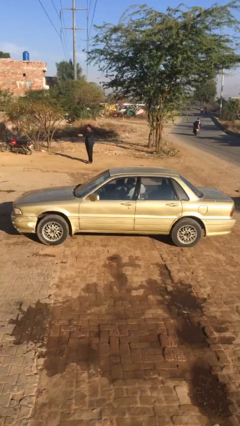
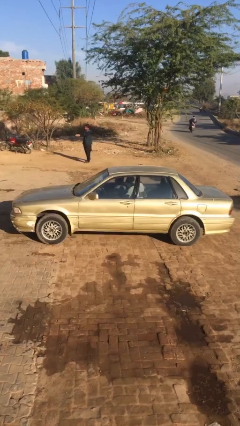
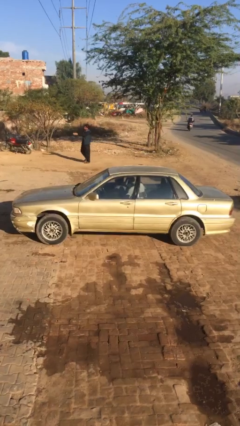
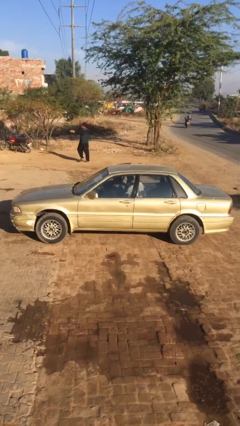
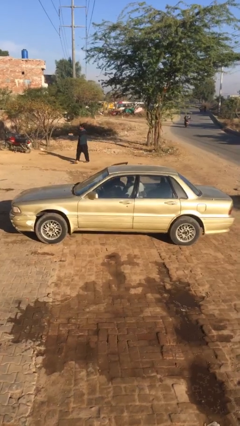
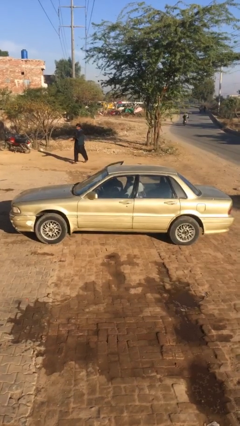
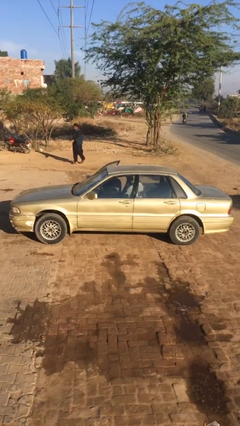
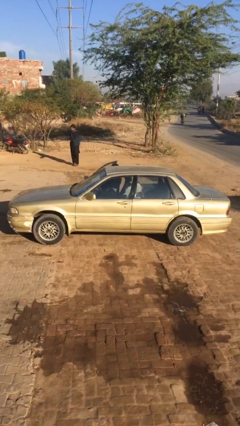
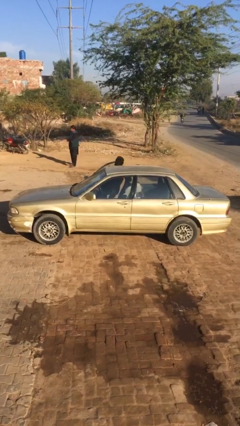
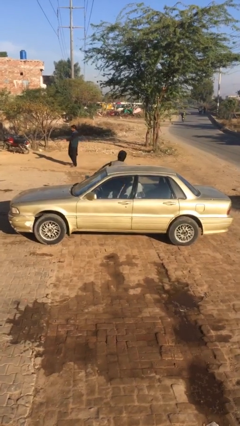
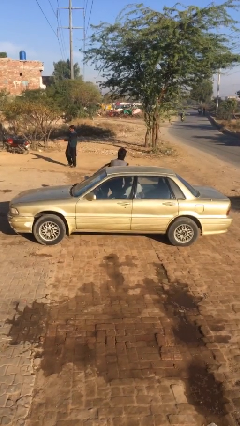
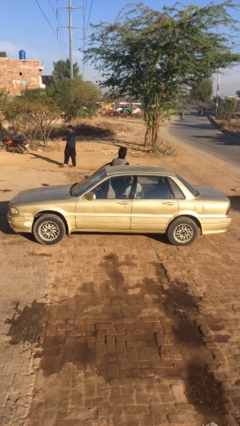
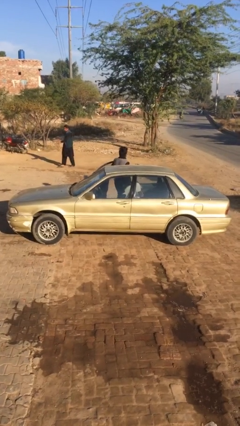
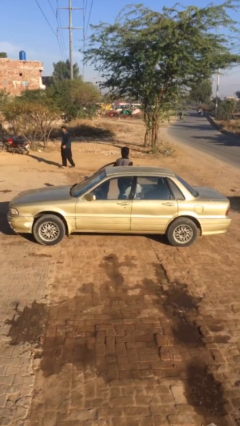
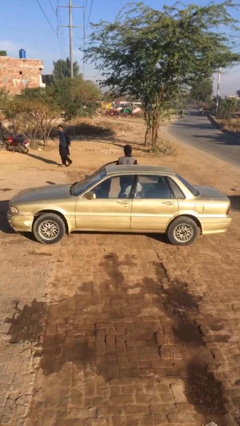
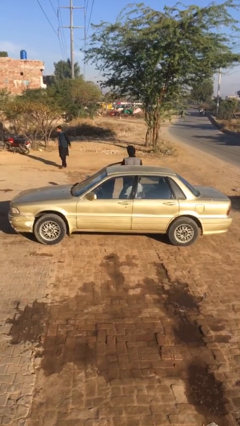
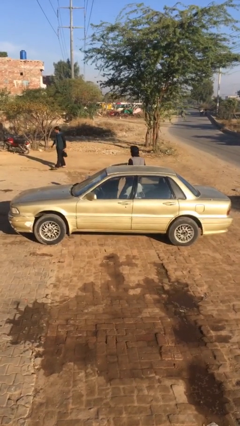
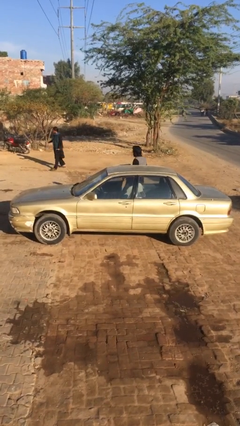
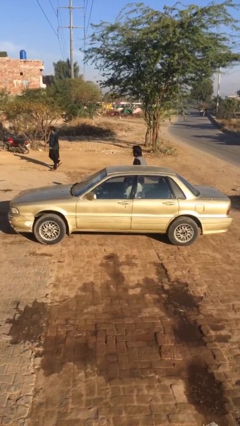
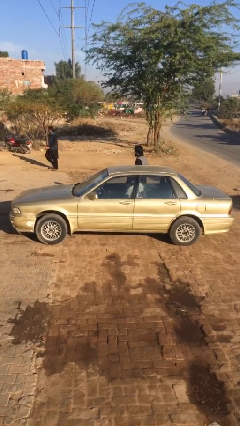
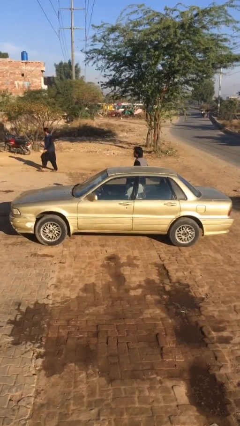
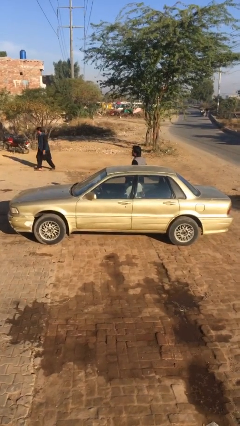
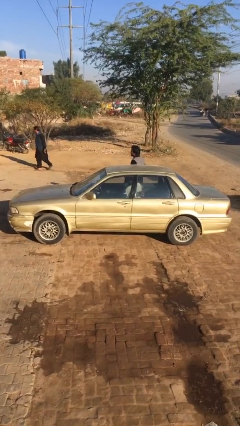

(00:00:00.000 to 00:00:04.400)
car drops off person

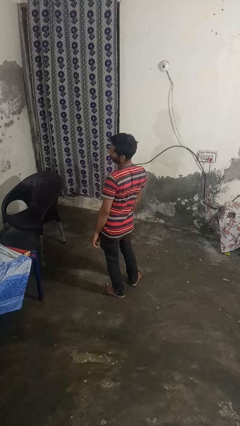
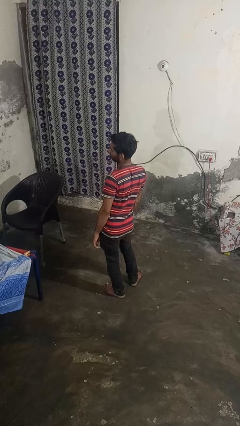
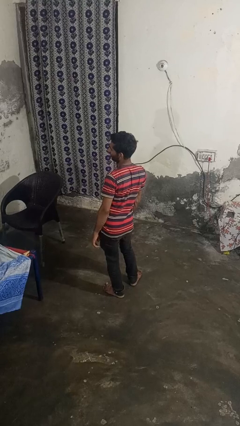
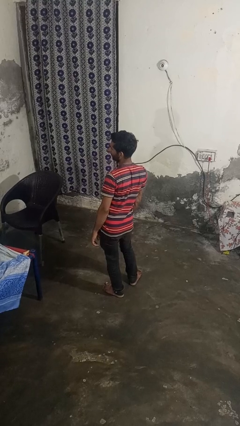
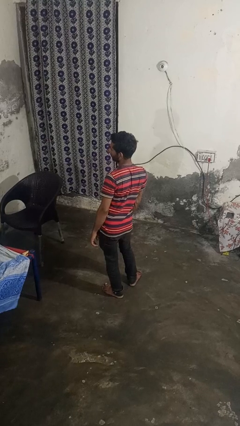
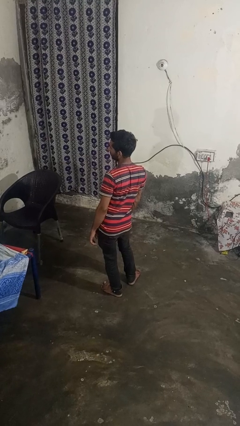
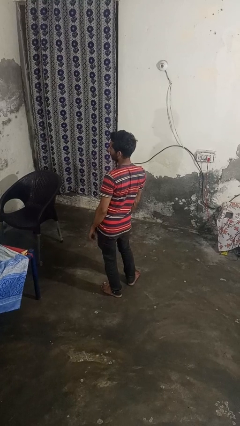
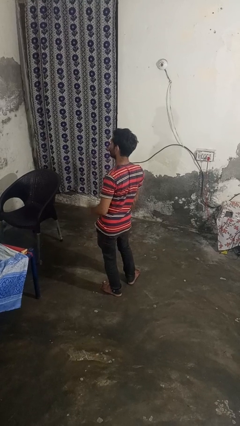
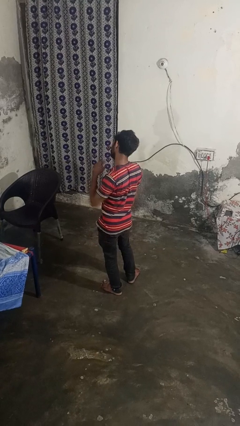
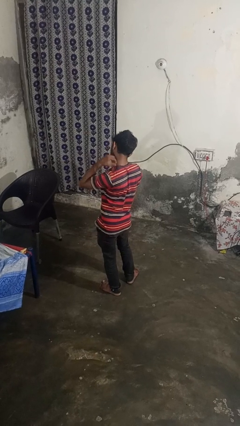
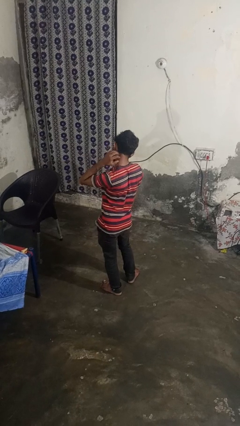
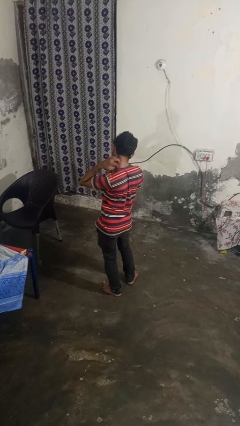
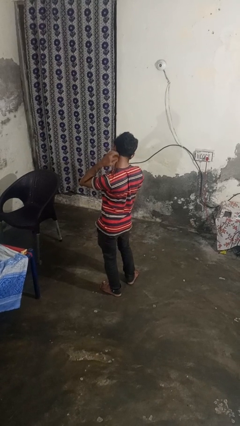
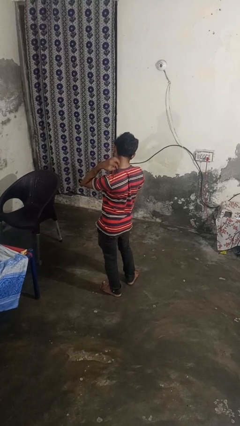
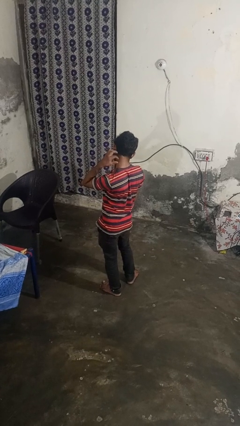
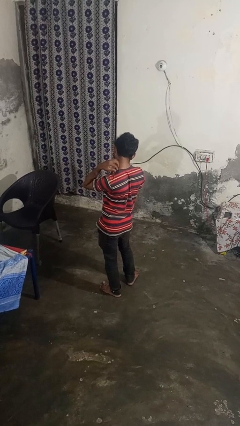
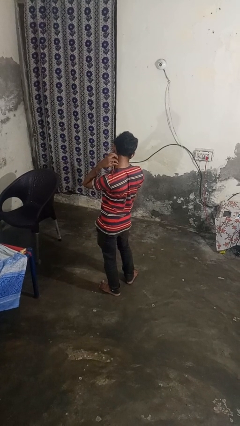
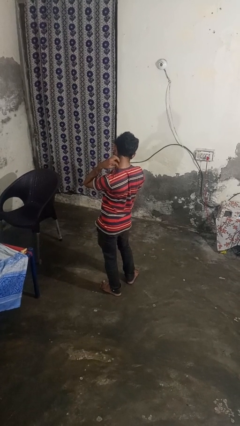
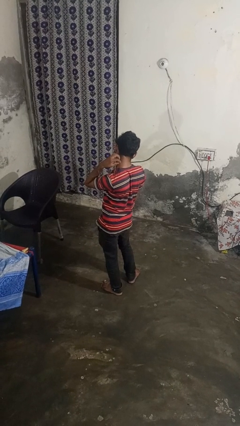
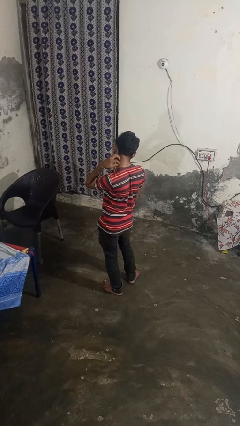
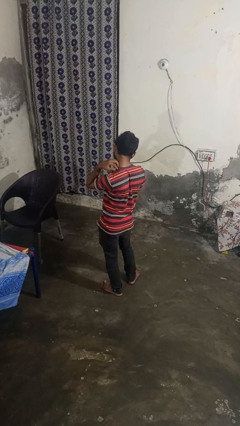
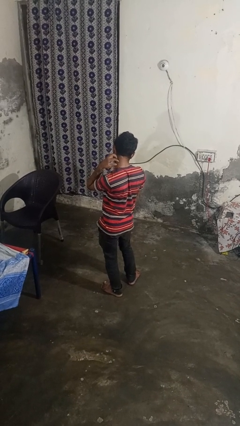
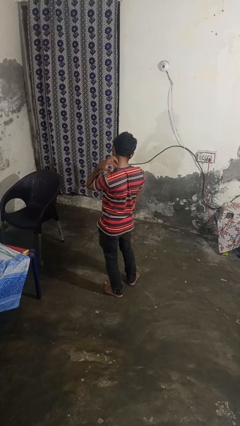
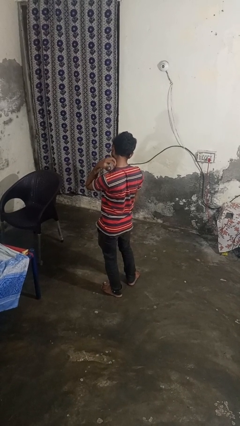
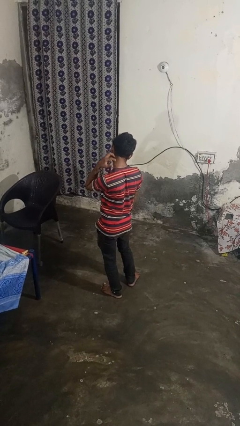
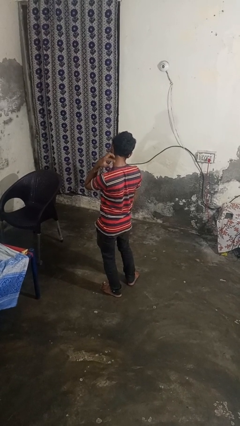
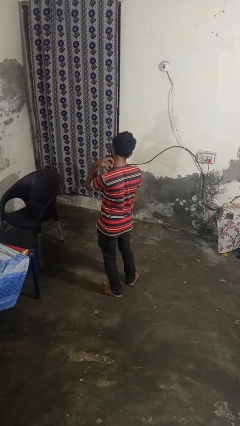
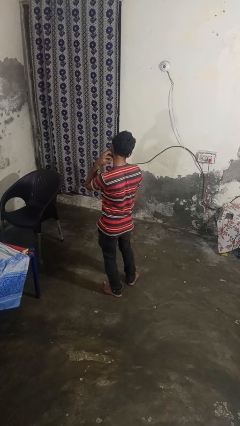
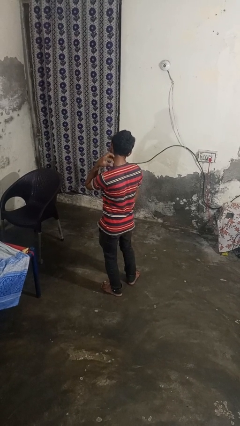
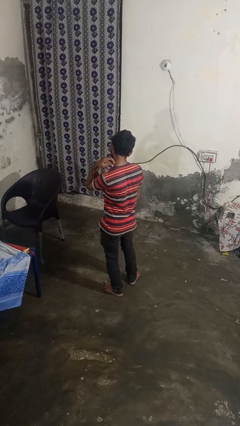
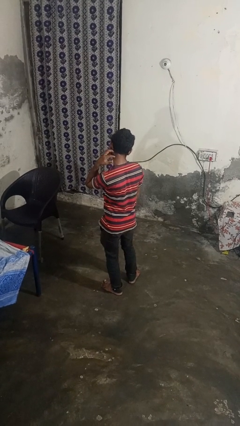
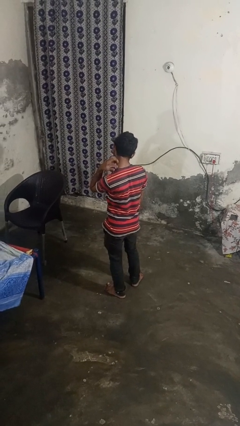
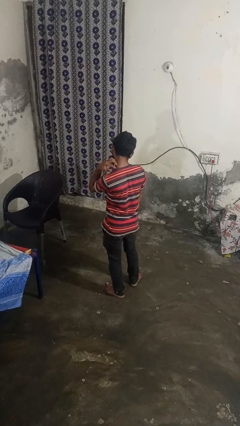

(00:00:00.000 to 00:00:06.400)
person cracks knuckles

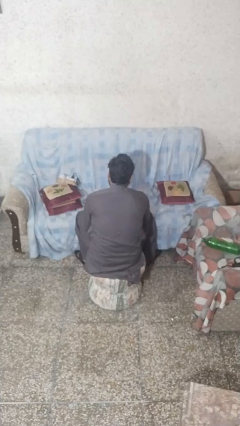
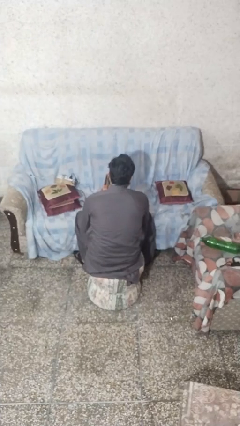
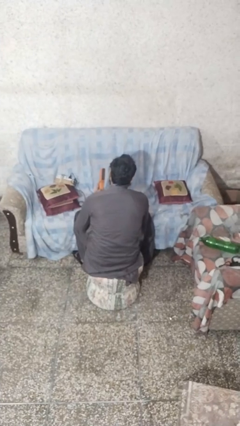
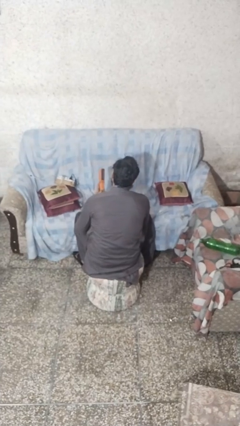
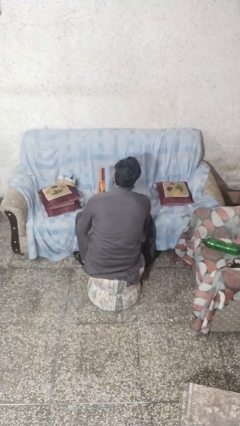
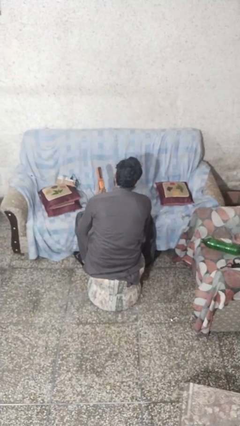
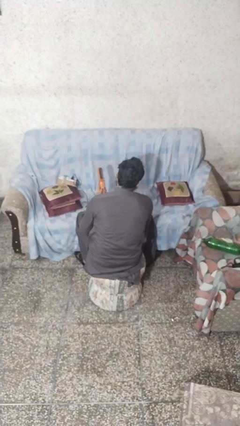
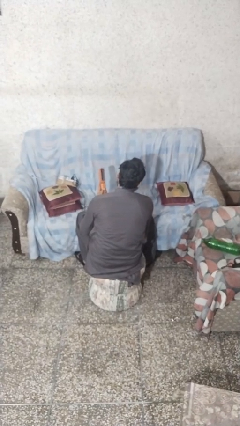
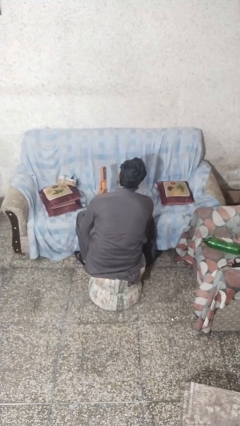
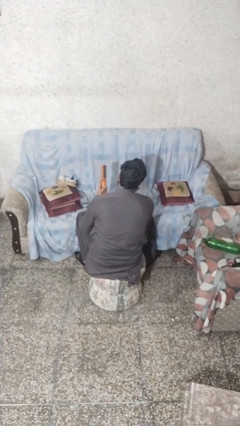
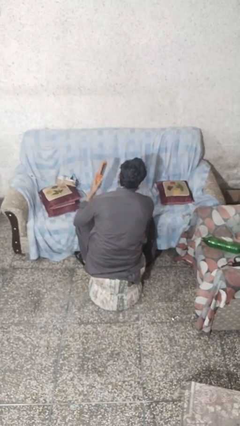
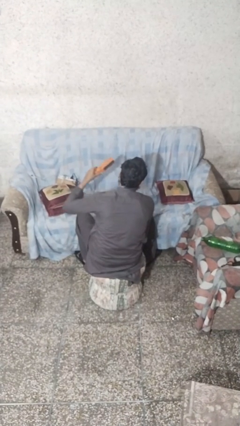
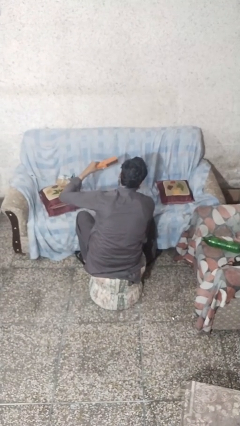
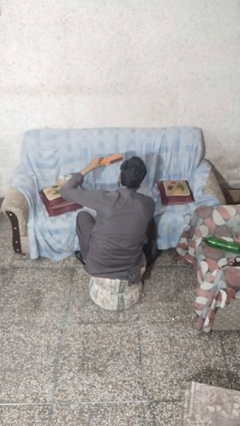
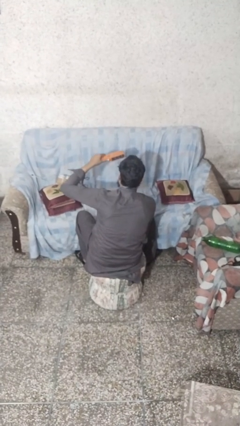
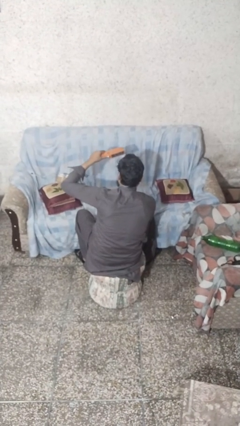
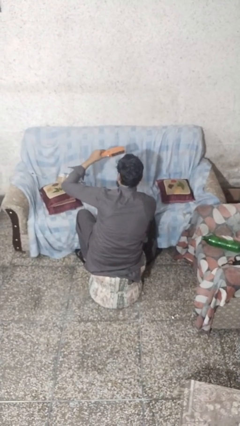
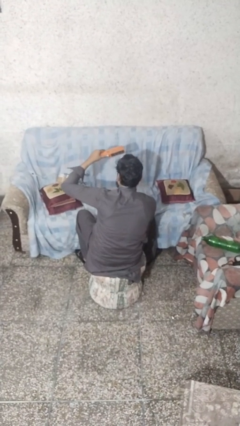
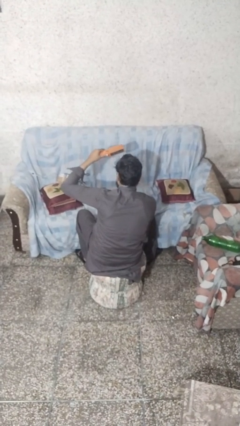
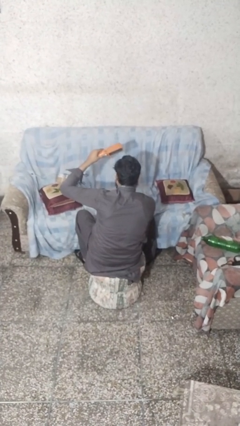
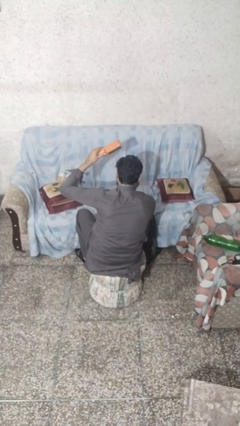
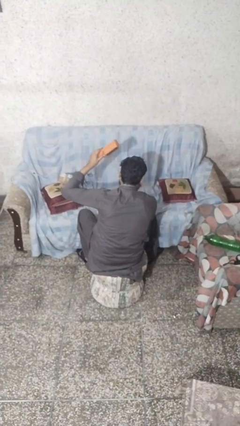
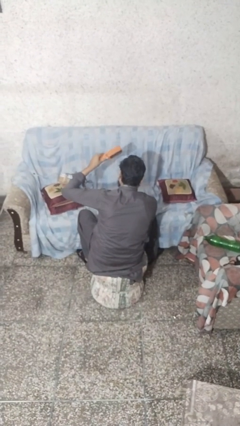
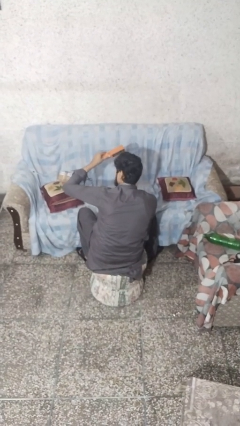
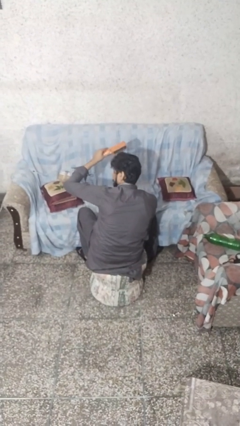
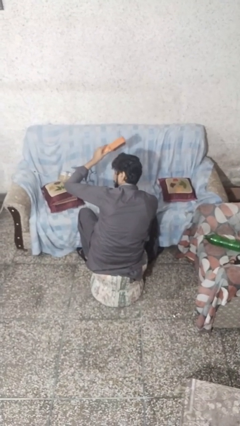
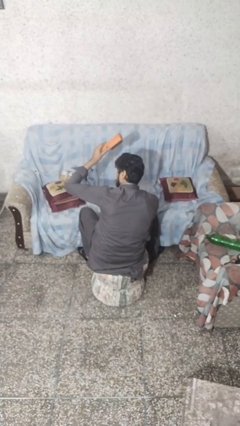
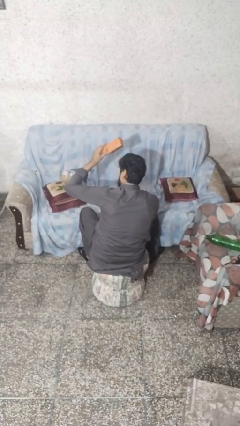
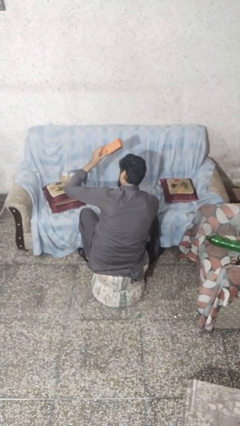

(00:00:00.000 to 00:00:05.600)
person dries hair with hairdryer

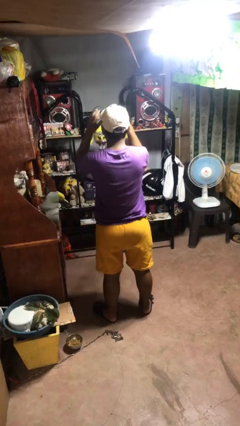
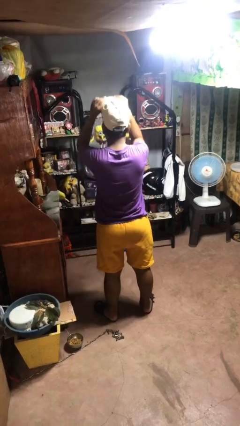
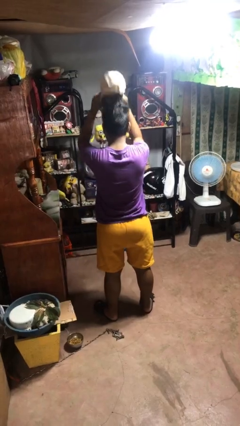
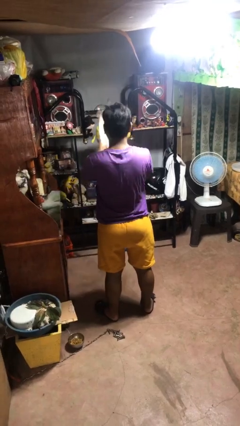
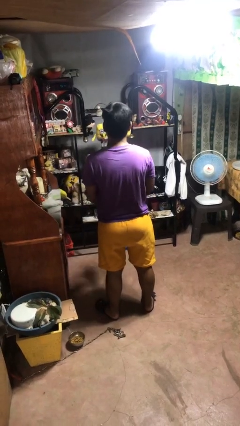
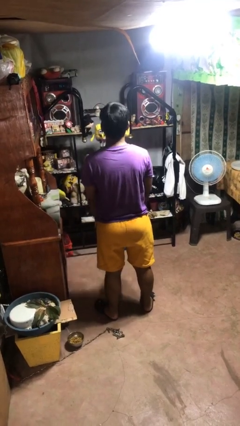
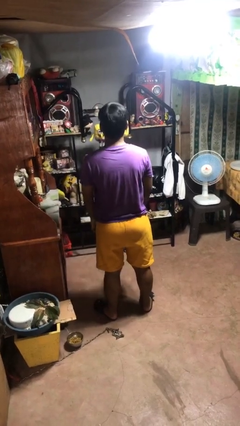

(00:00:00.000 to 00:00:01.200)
person takes off hat

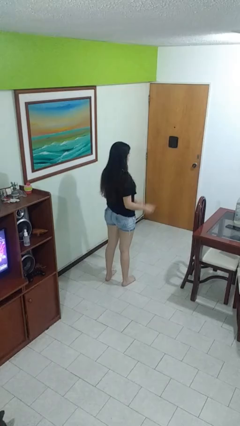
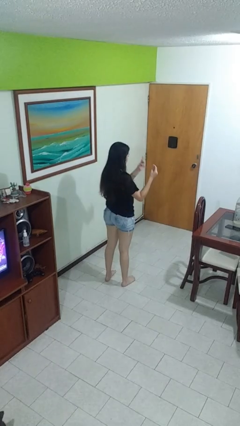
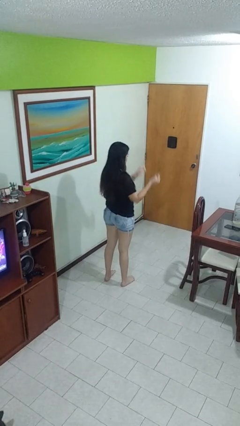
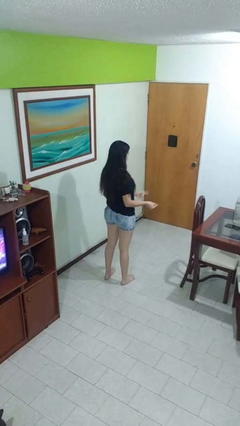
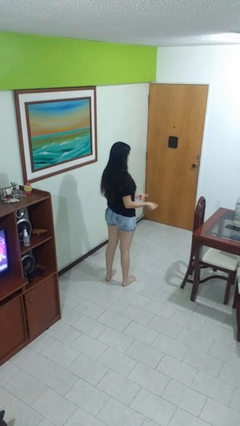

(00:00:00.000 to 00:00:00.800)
person snaps fingers
